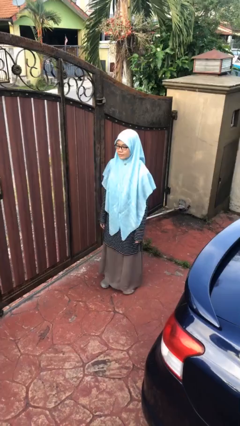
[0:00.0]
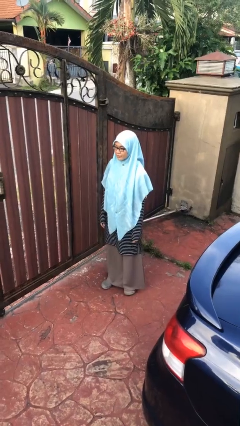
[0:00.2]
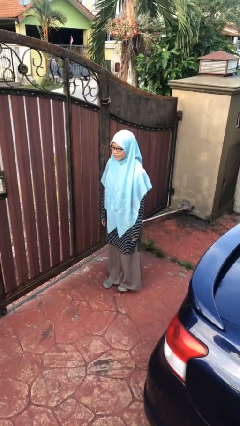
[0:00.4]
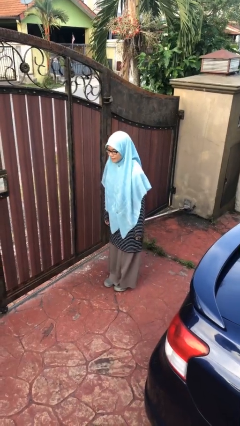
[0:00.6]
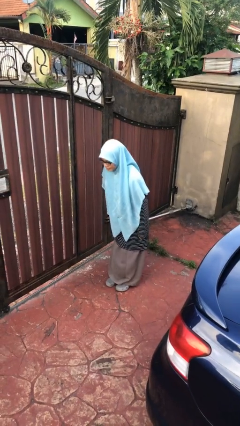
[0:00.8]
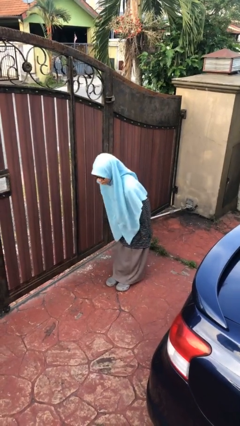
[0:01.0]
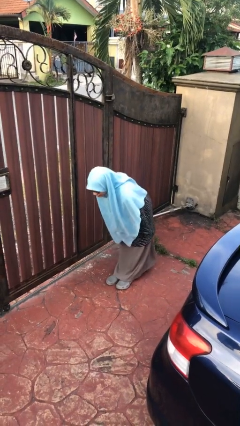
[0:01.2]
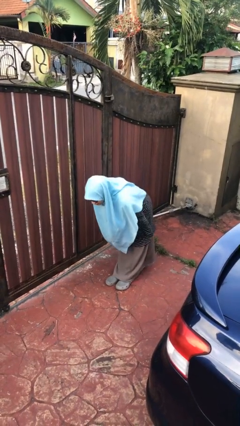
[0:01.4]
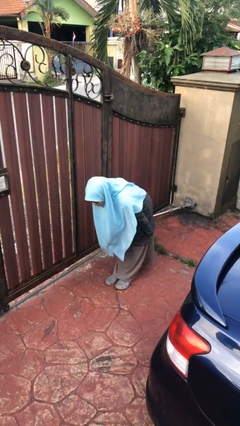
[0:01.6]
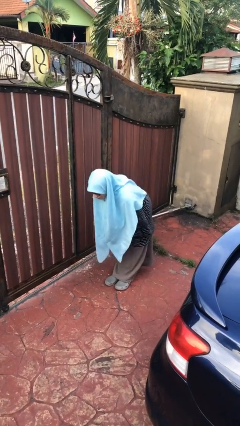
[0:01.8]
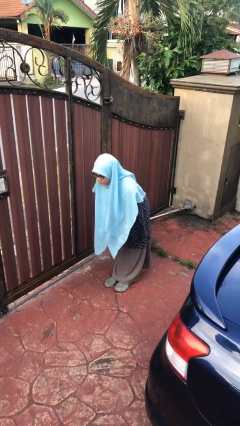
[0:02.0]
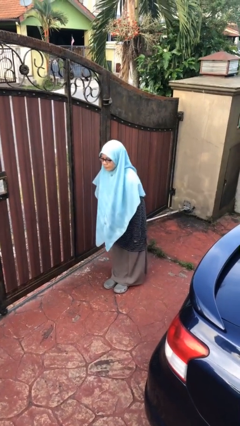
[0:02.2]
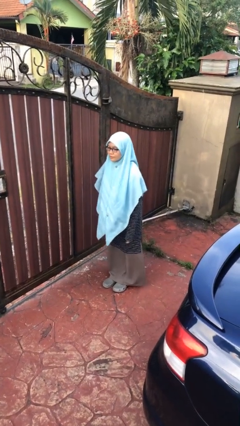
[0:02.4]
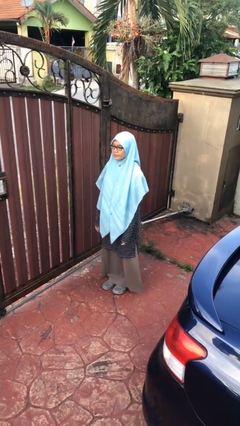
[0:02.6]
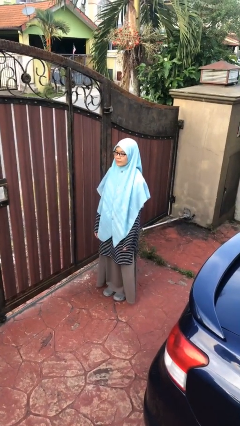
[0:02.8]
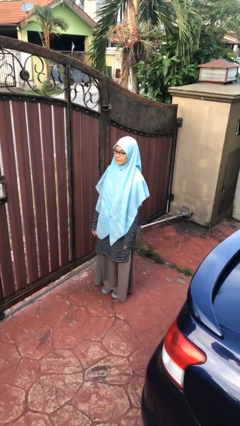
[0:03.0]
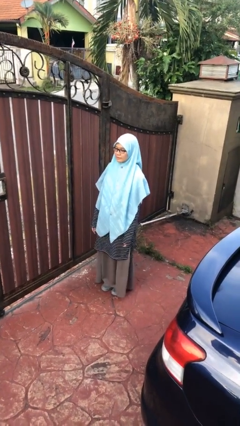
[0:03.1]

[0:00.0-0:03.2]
person bows

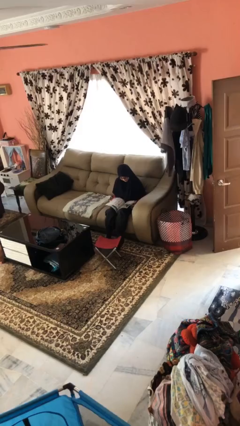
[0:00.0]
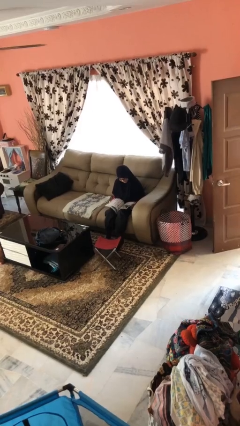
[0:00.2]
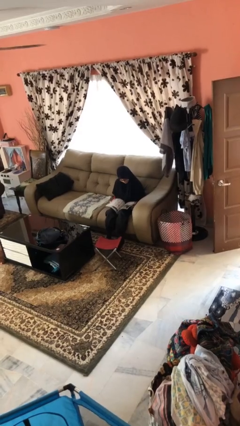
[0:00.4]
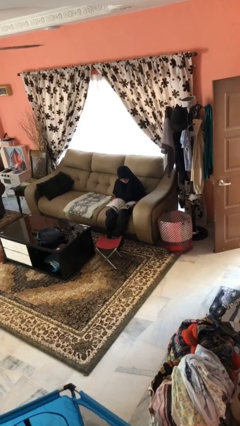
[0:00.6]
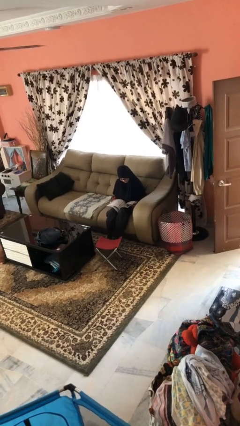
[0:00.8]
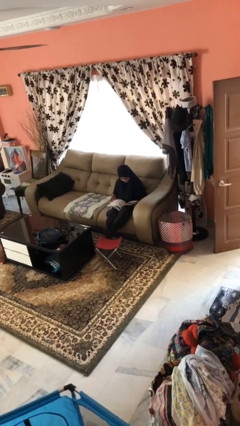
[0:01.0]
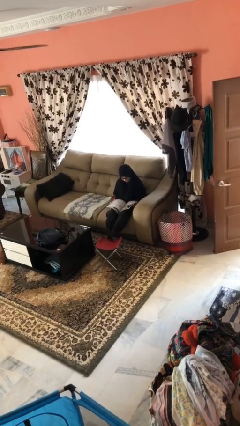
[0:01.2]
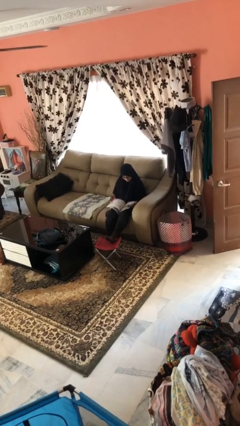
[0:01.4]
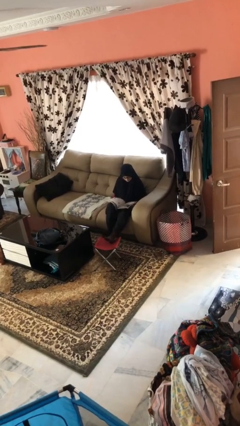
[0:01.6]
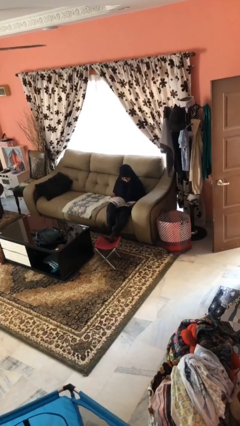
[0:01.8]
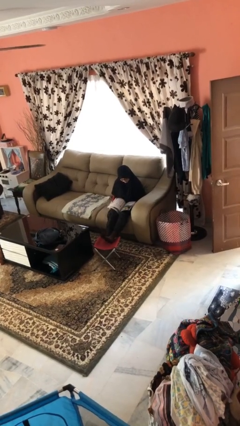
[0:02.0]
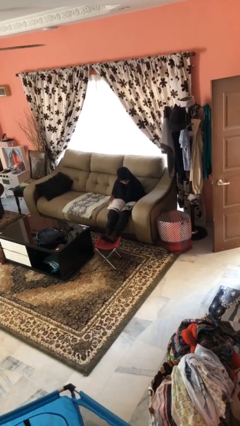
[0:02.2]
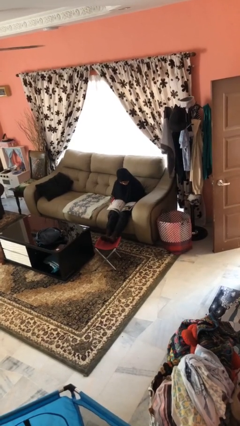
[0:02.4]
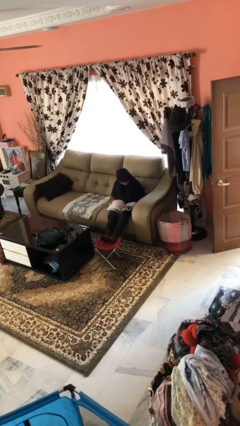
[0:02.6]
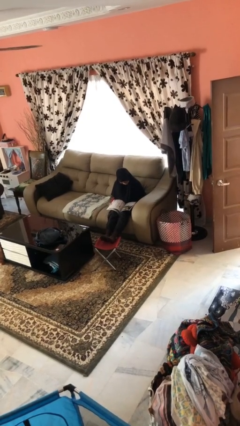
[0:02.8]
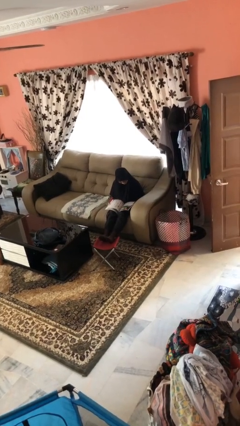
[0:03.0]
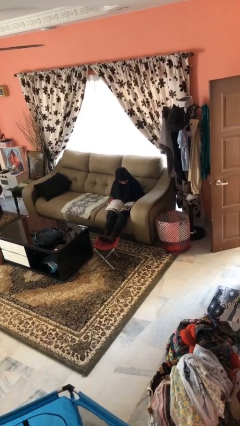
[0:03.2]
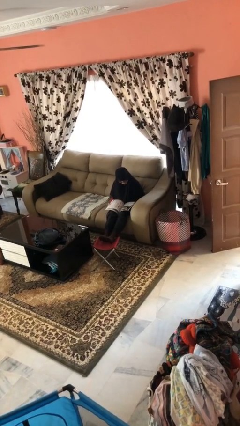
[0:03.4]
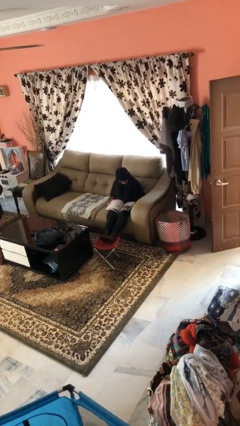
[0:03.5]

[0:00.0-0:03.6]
person puts feet up

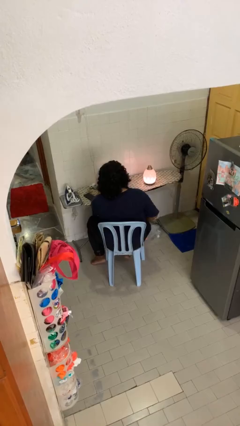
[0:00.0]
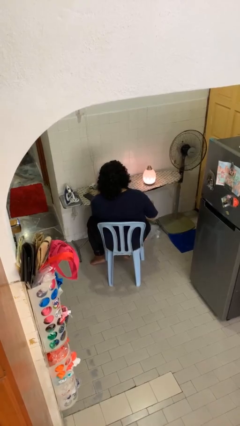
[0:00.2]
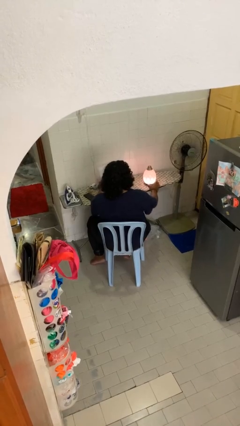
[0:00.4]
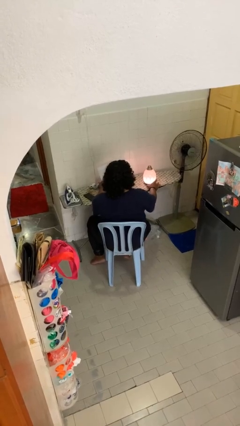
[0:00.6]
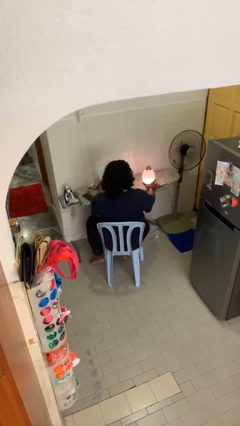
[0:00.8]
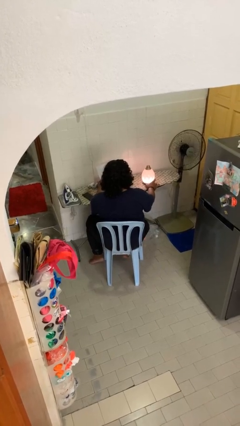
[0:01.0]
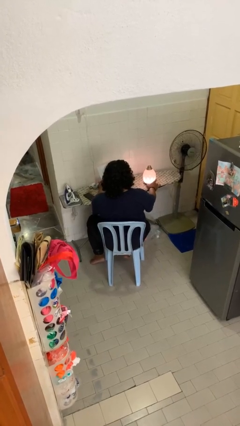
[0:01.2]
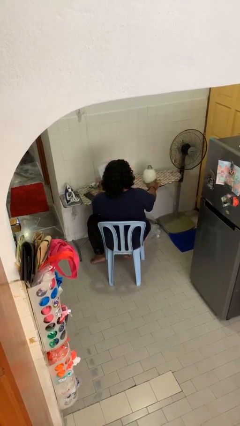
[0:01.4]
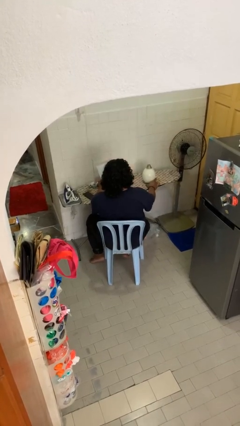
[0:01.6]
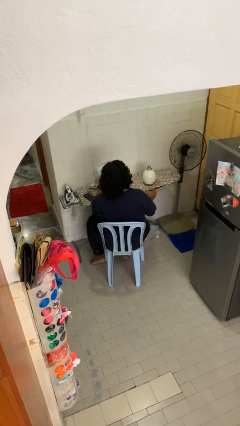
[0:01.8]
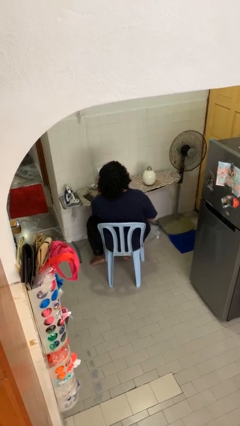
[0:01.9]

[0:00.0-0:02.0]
person turns off lamp

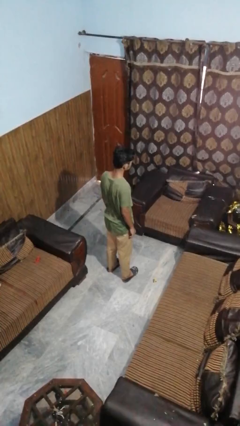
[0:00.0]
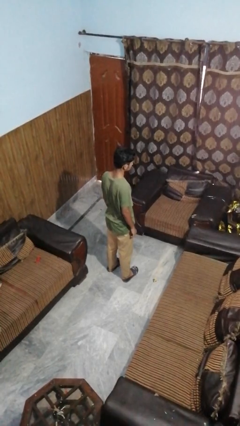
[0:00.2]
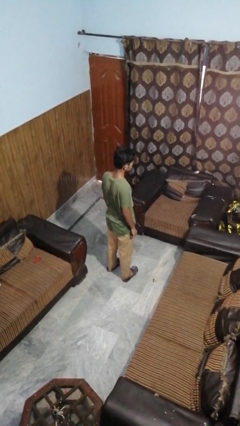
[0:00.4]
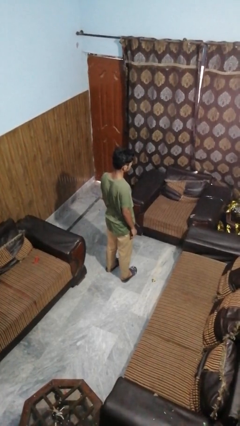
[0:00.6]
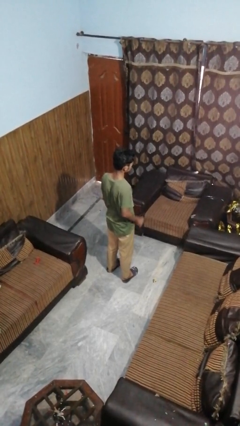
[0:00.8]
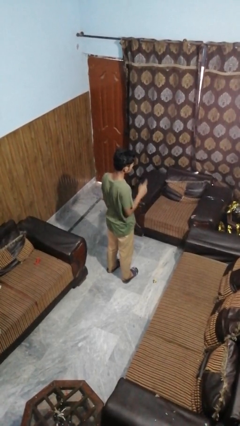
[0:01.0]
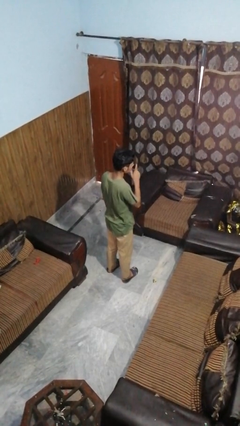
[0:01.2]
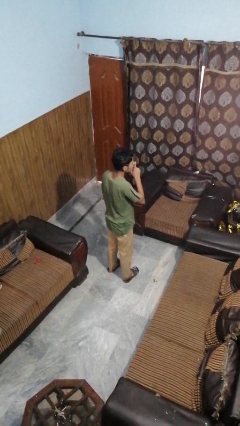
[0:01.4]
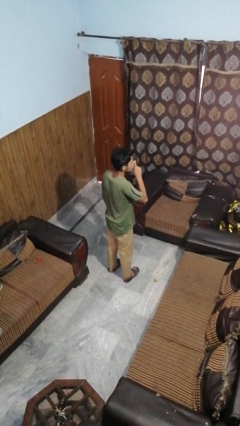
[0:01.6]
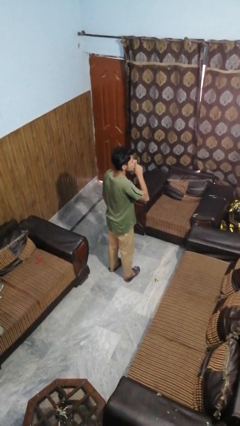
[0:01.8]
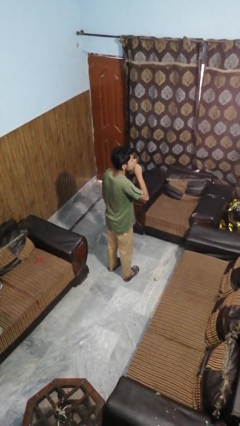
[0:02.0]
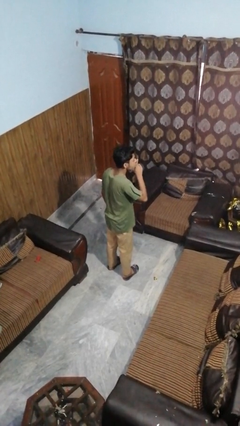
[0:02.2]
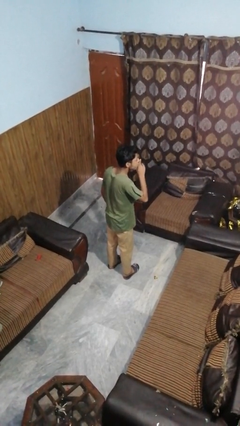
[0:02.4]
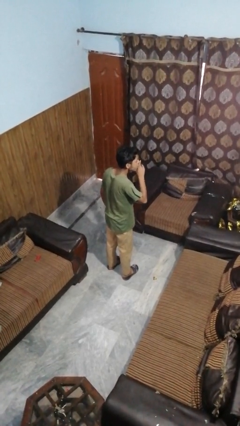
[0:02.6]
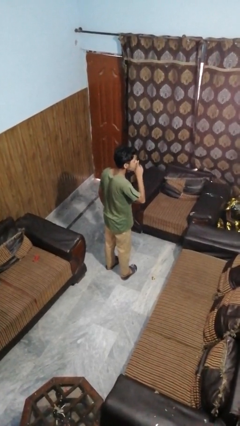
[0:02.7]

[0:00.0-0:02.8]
person gestures be quiet

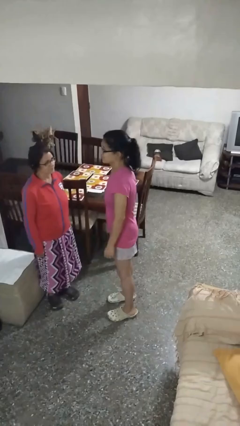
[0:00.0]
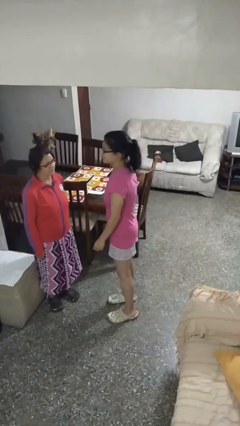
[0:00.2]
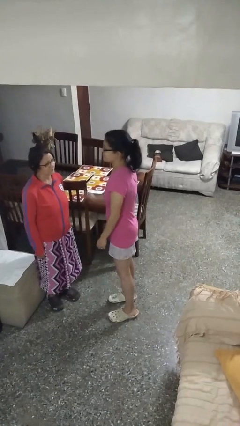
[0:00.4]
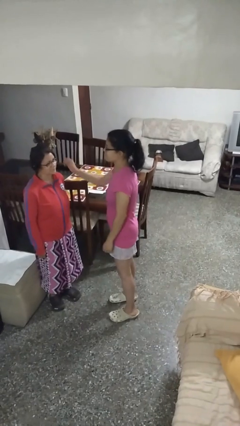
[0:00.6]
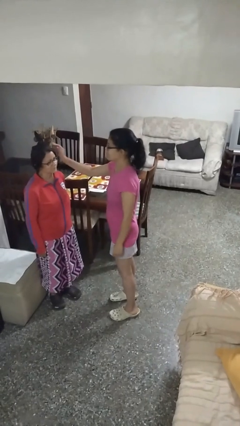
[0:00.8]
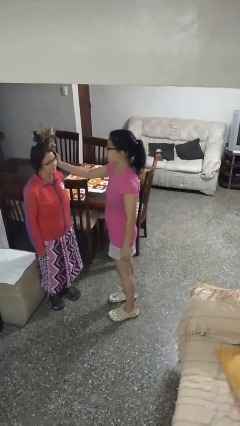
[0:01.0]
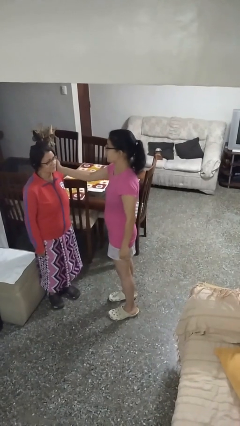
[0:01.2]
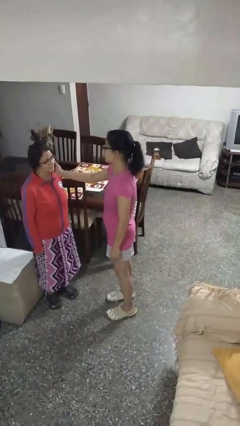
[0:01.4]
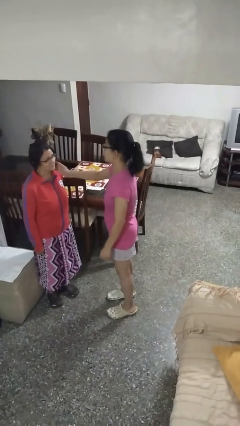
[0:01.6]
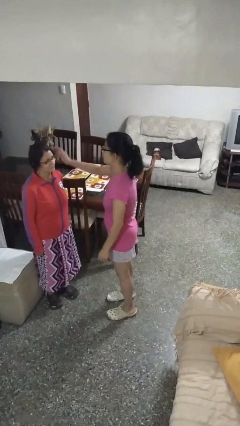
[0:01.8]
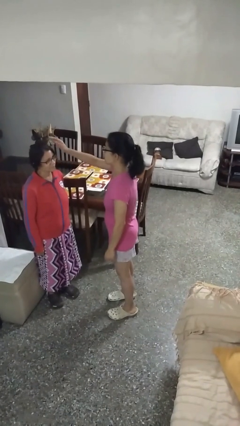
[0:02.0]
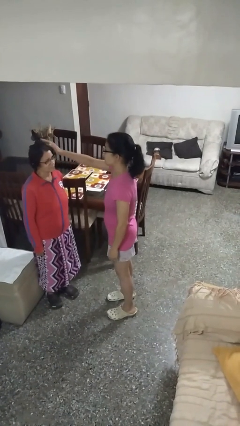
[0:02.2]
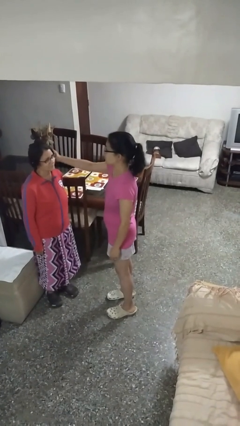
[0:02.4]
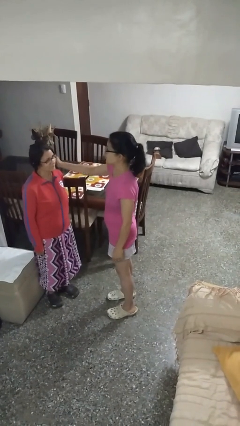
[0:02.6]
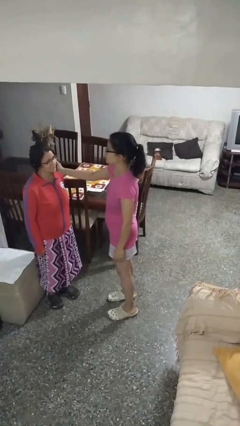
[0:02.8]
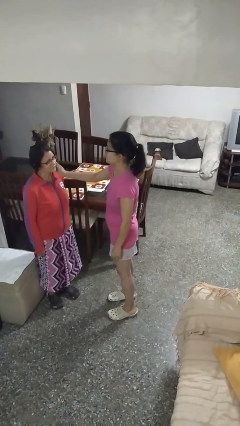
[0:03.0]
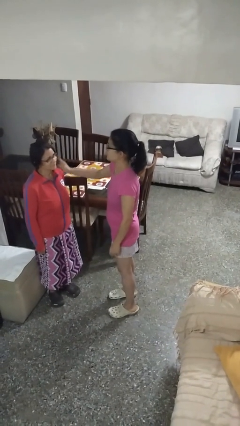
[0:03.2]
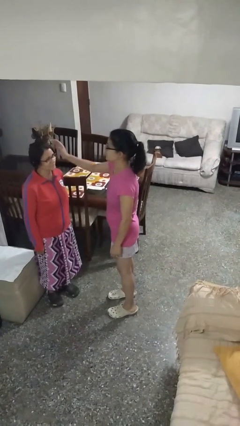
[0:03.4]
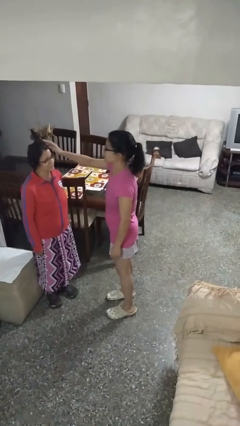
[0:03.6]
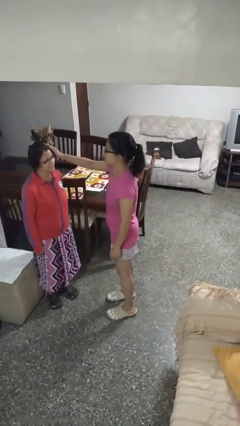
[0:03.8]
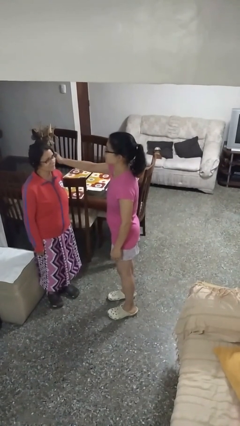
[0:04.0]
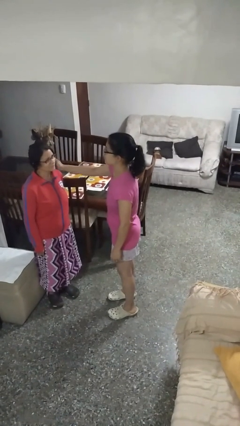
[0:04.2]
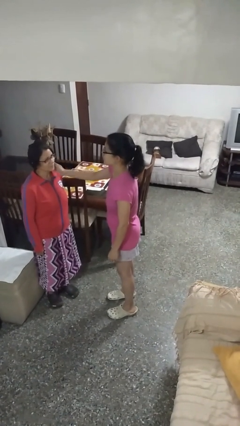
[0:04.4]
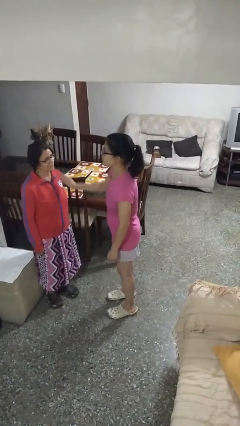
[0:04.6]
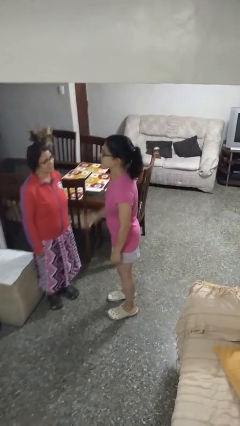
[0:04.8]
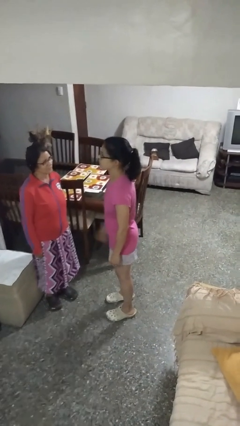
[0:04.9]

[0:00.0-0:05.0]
person touches face of person

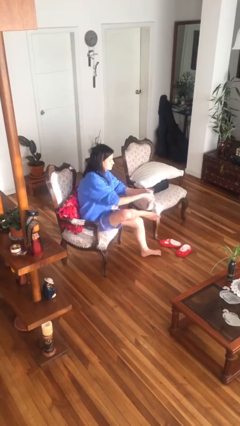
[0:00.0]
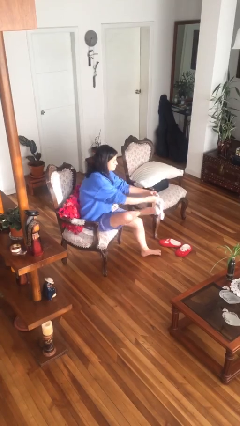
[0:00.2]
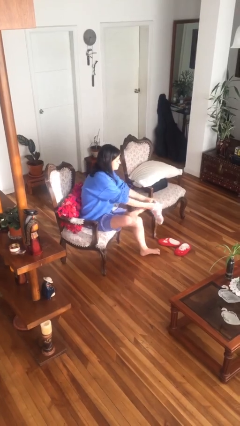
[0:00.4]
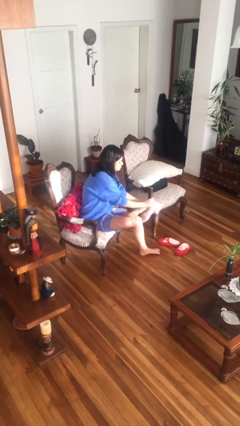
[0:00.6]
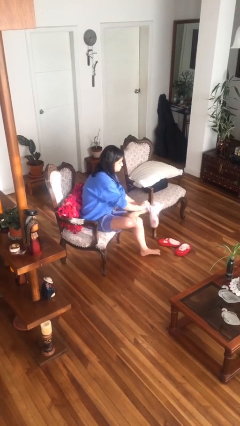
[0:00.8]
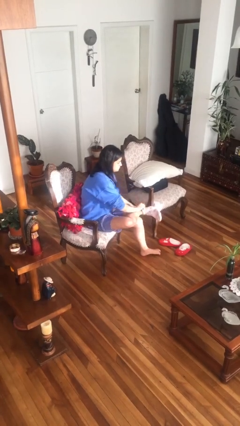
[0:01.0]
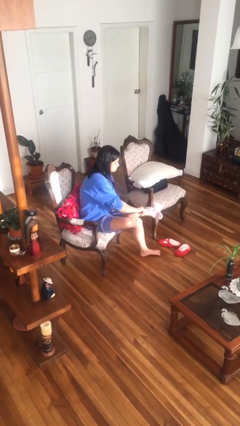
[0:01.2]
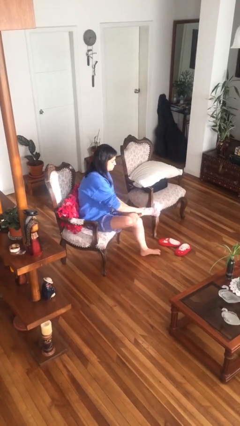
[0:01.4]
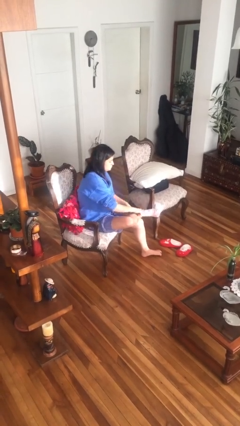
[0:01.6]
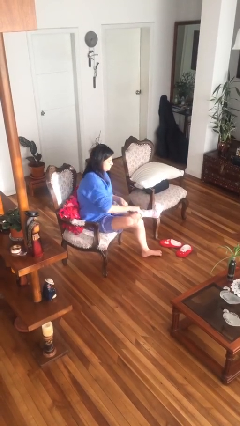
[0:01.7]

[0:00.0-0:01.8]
person puts on socks
